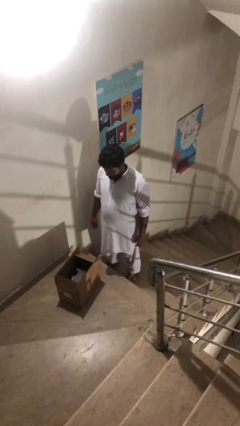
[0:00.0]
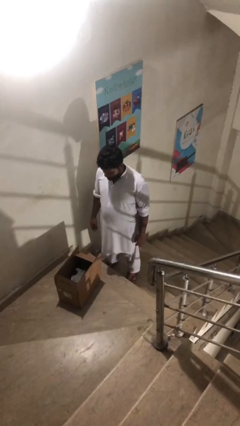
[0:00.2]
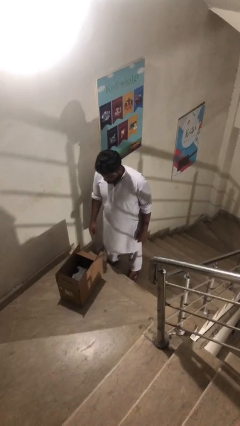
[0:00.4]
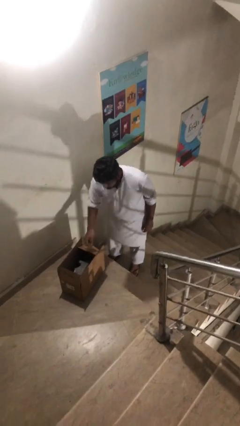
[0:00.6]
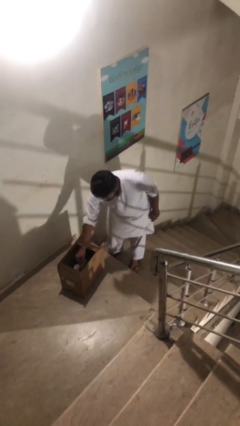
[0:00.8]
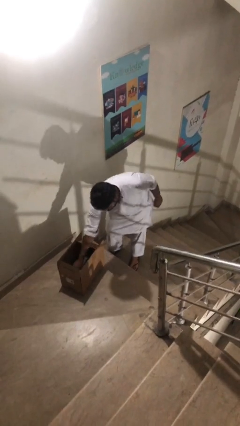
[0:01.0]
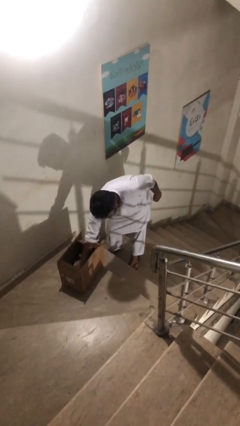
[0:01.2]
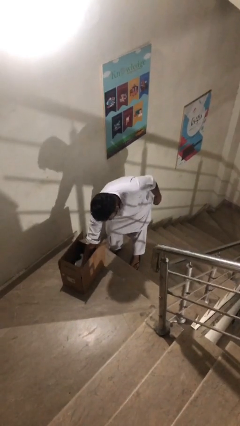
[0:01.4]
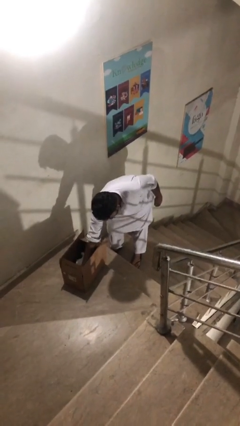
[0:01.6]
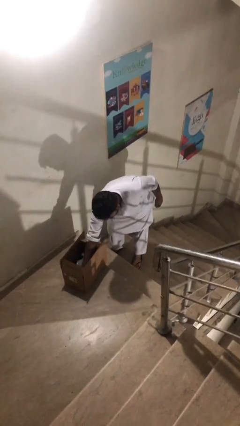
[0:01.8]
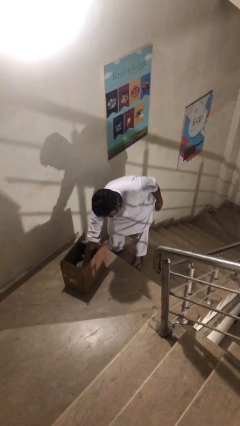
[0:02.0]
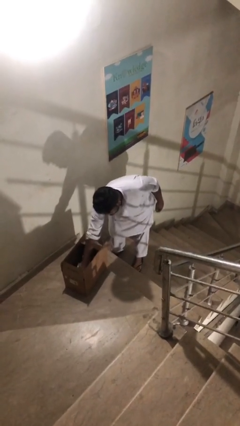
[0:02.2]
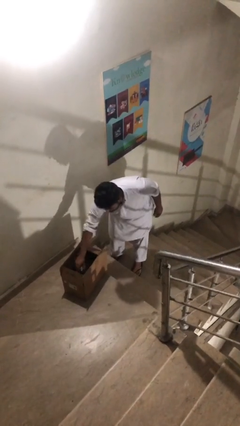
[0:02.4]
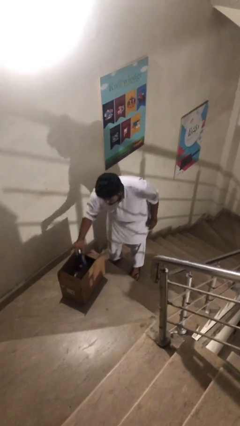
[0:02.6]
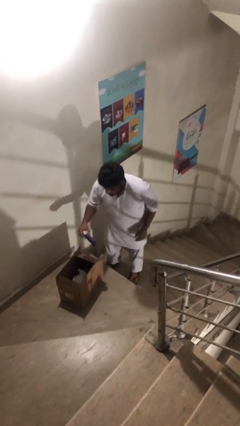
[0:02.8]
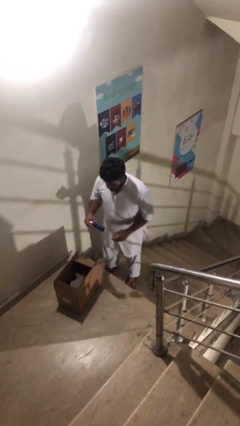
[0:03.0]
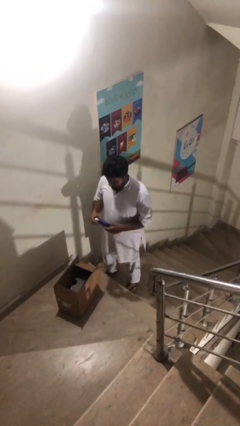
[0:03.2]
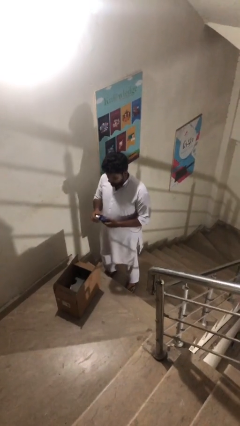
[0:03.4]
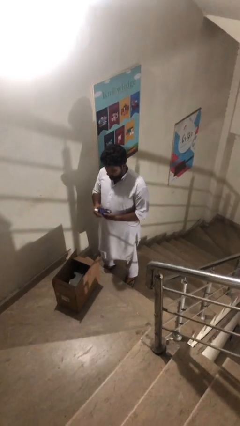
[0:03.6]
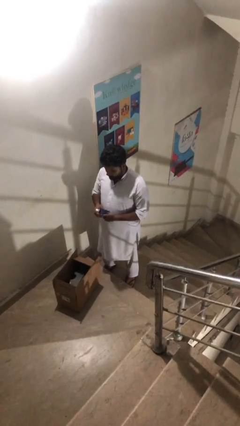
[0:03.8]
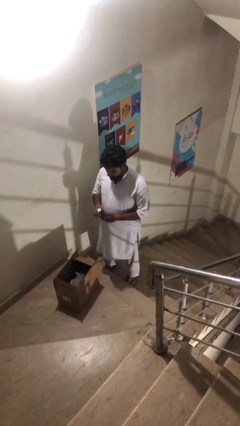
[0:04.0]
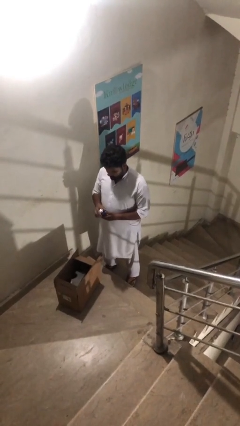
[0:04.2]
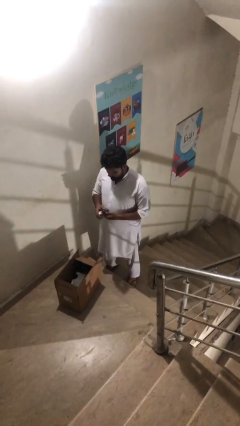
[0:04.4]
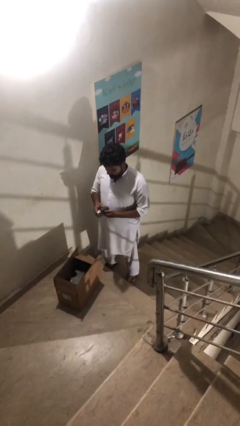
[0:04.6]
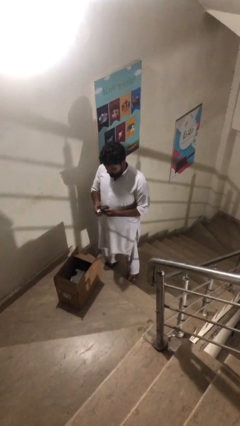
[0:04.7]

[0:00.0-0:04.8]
person takes object from box

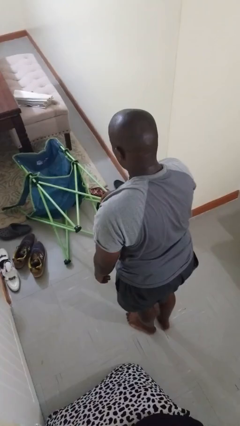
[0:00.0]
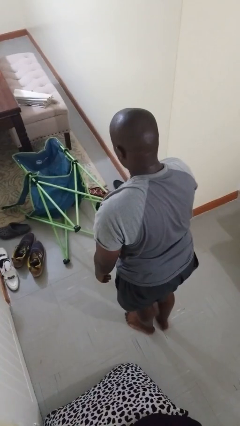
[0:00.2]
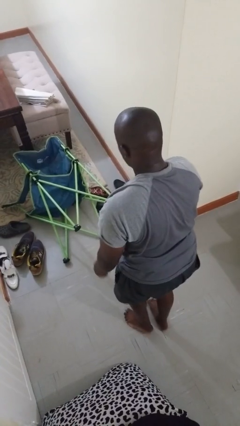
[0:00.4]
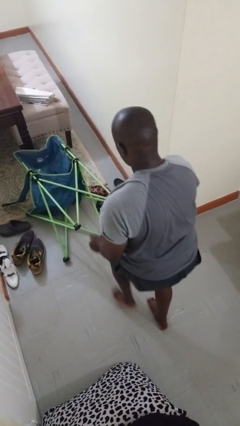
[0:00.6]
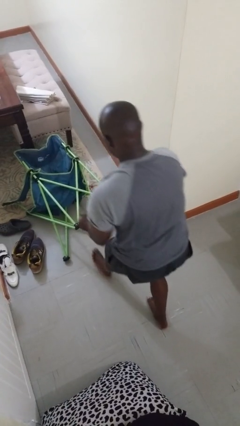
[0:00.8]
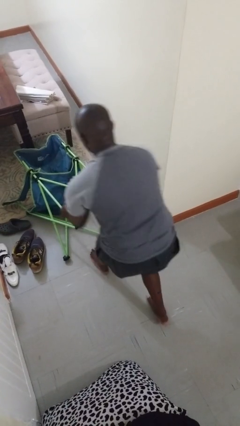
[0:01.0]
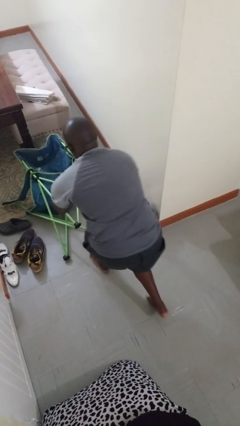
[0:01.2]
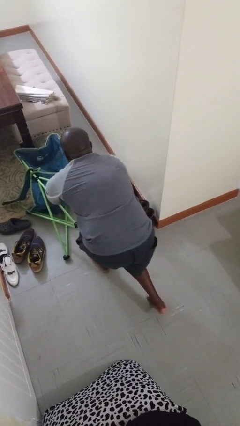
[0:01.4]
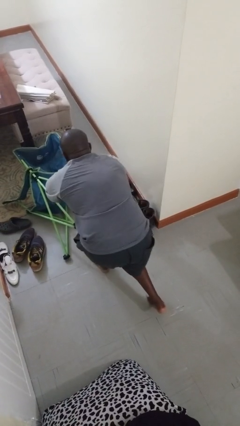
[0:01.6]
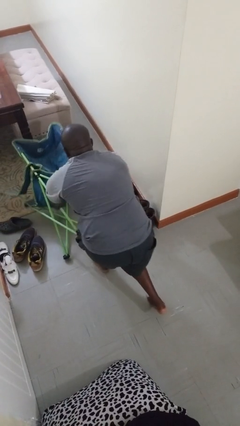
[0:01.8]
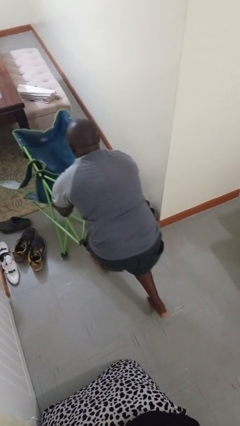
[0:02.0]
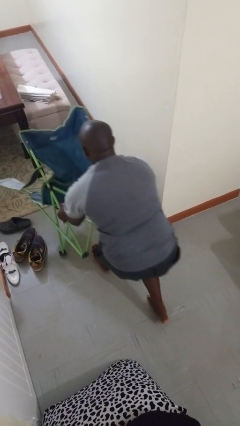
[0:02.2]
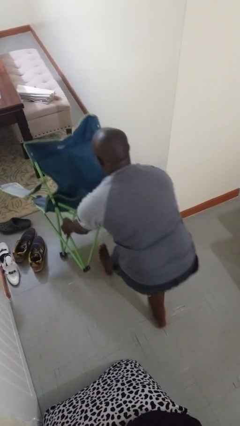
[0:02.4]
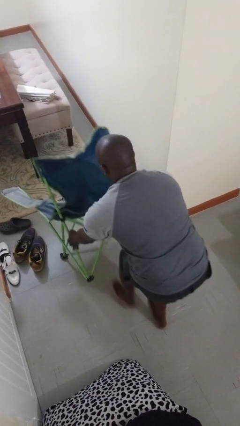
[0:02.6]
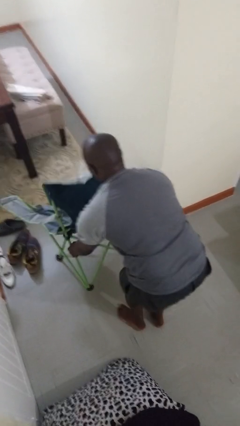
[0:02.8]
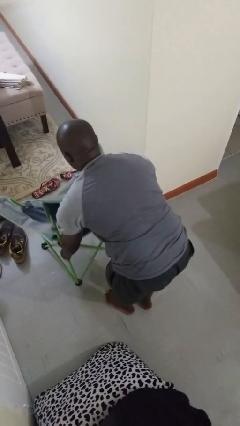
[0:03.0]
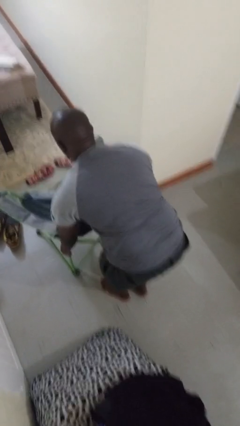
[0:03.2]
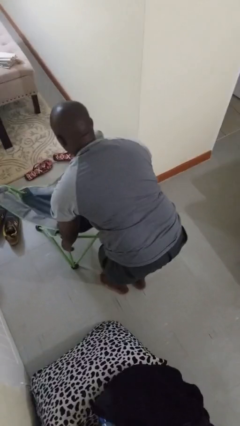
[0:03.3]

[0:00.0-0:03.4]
person sets upright furniture

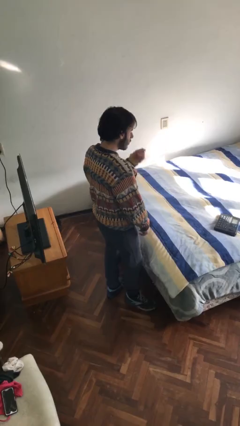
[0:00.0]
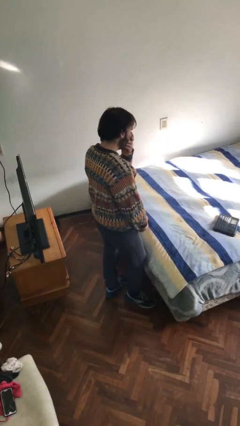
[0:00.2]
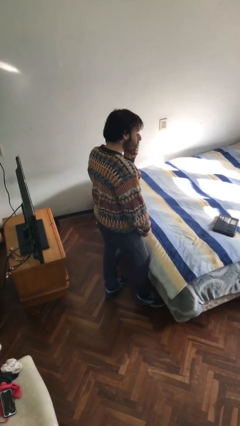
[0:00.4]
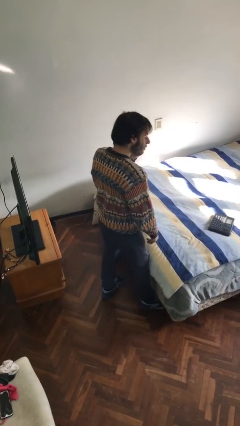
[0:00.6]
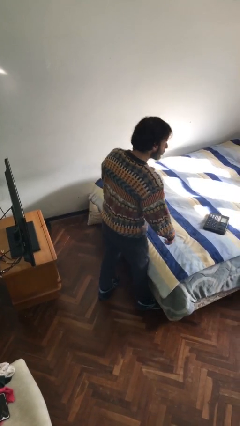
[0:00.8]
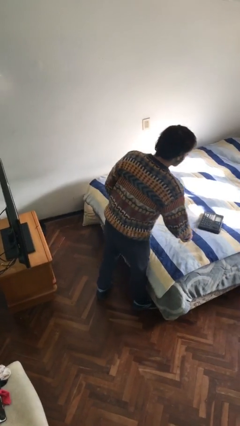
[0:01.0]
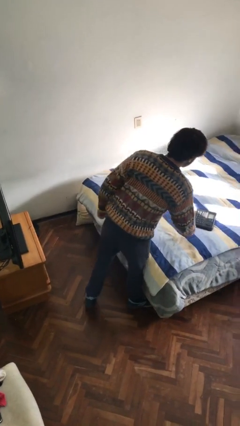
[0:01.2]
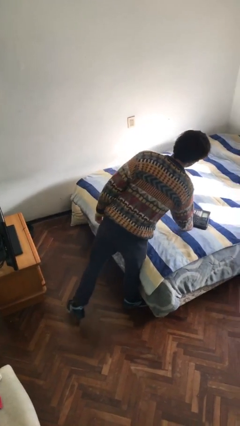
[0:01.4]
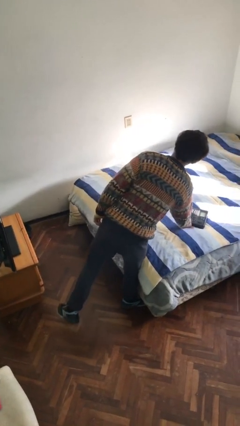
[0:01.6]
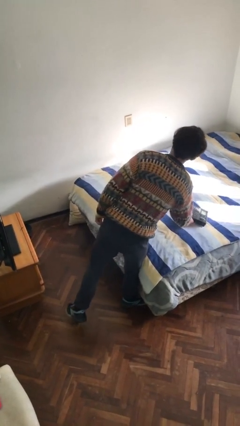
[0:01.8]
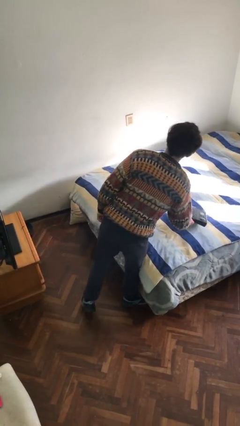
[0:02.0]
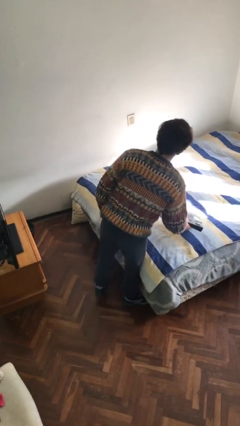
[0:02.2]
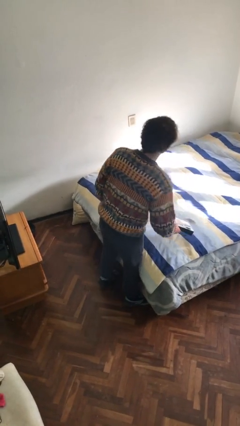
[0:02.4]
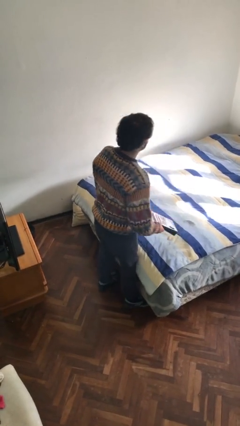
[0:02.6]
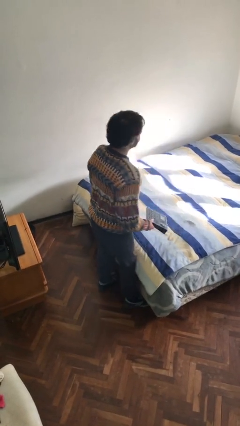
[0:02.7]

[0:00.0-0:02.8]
person picks up object from bed

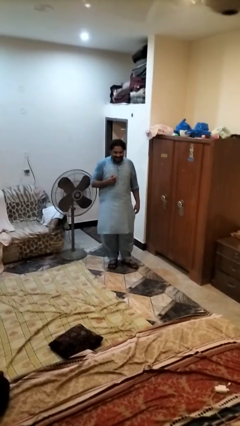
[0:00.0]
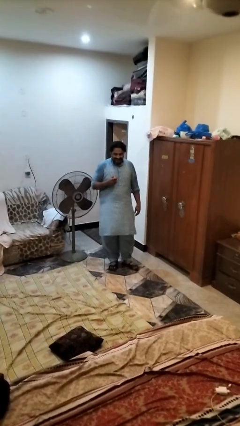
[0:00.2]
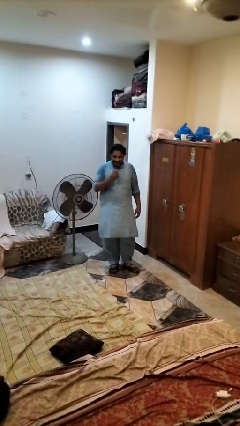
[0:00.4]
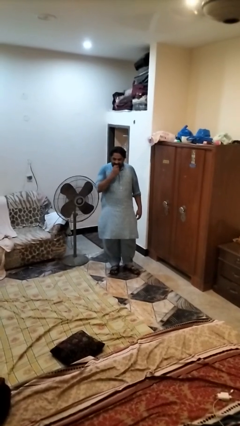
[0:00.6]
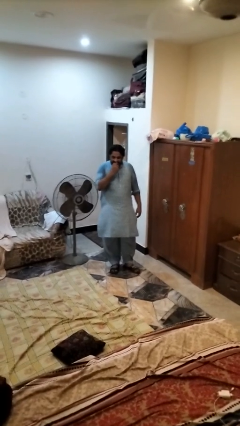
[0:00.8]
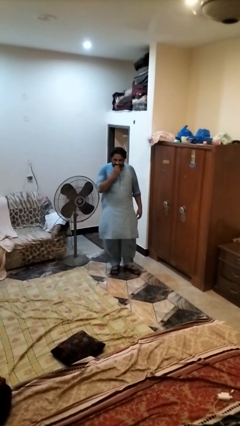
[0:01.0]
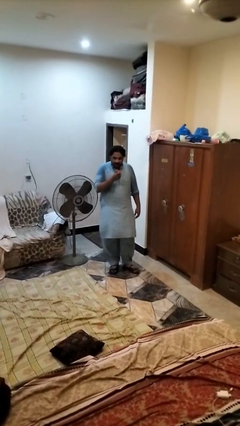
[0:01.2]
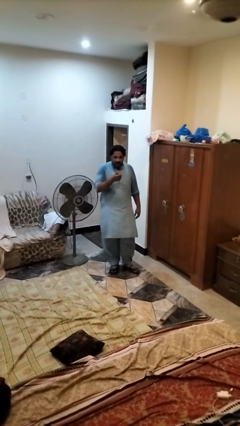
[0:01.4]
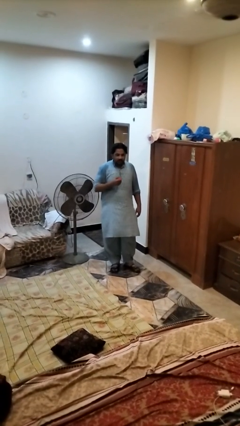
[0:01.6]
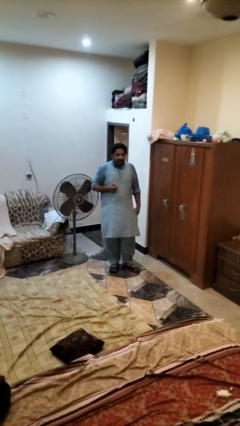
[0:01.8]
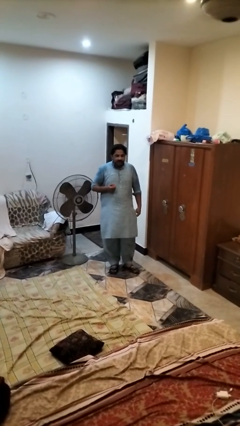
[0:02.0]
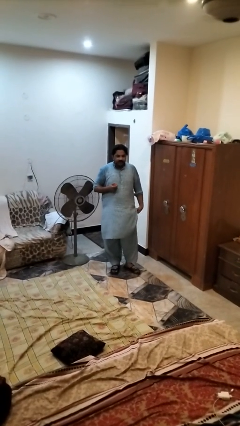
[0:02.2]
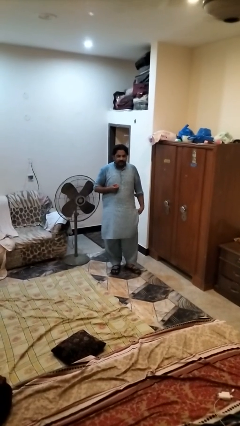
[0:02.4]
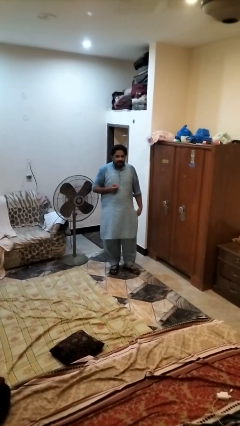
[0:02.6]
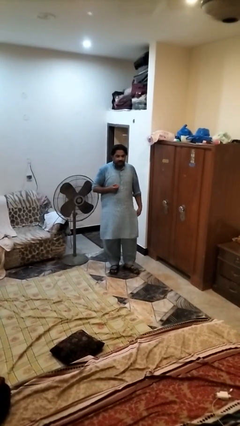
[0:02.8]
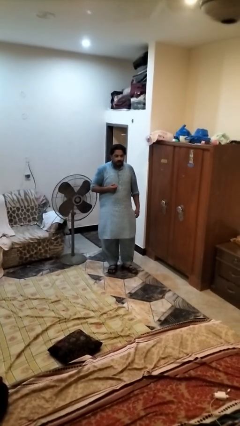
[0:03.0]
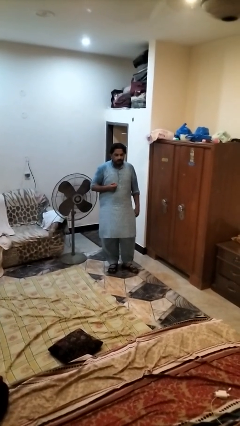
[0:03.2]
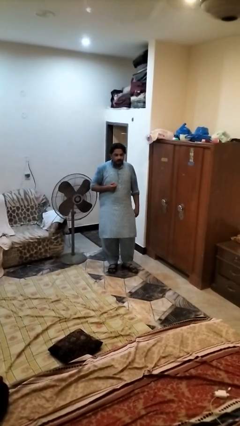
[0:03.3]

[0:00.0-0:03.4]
person eats apple

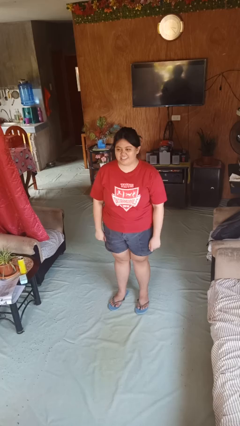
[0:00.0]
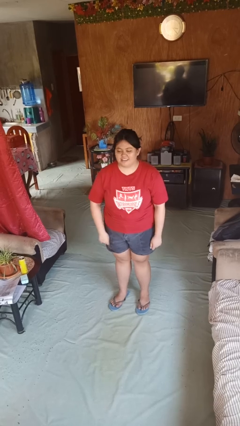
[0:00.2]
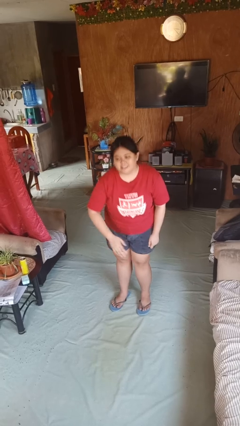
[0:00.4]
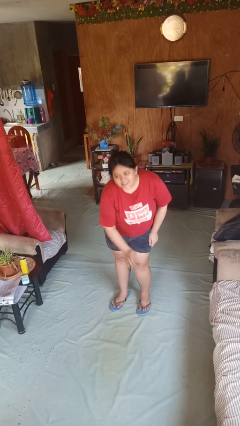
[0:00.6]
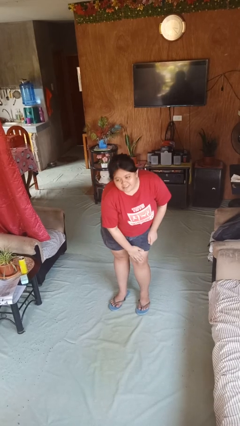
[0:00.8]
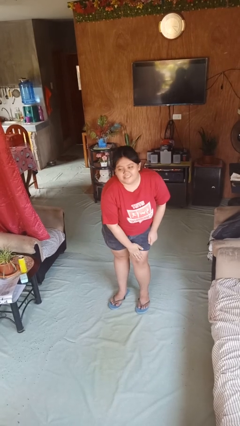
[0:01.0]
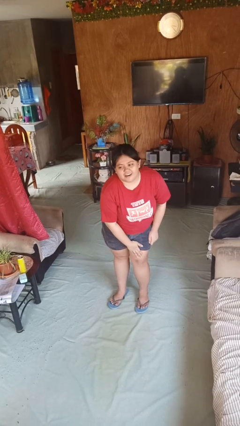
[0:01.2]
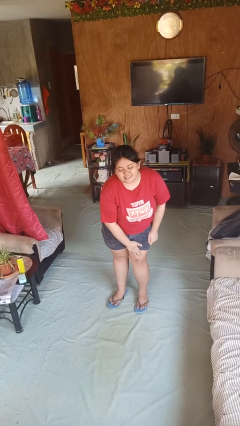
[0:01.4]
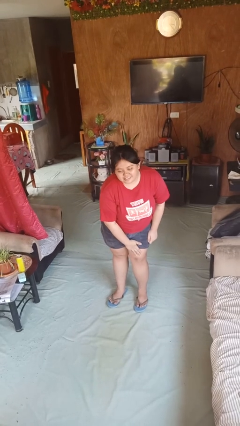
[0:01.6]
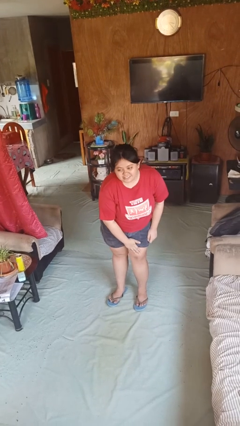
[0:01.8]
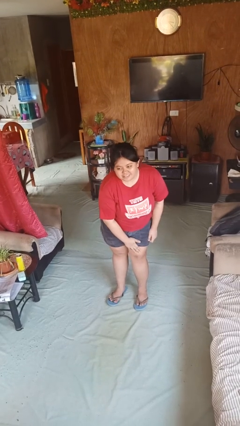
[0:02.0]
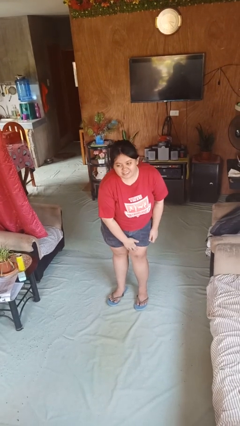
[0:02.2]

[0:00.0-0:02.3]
person swats bug

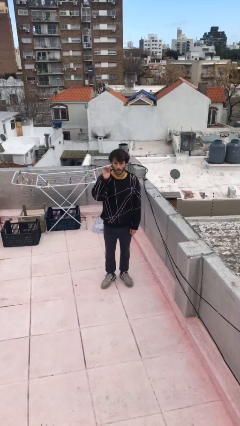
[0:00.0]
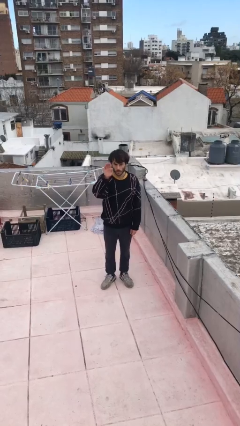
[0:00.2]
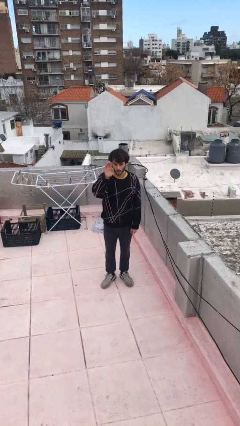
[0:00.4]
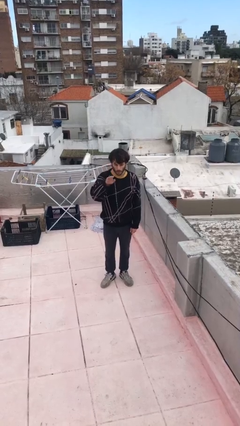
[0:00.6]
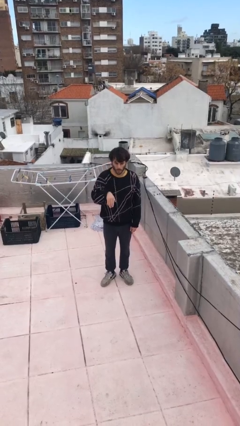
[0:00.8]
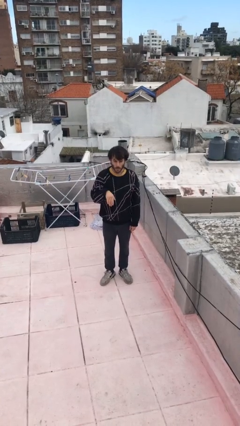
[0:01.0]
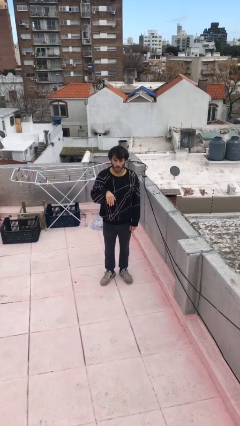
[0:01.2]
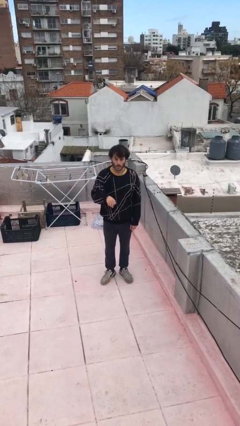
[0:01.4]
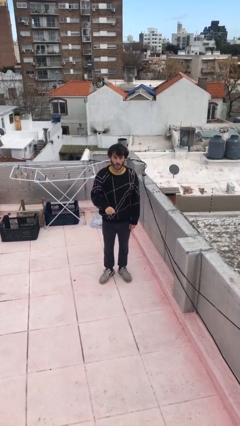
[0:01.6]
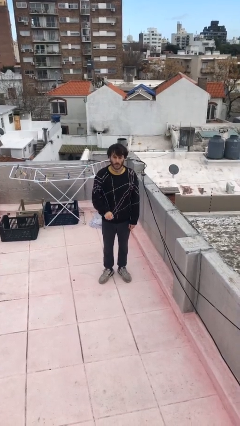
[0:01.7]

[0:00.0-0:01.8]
person gestures swipe down
